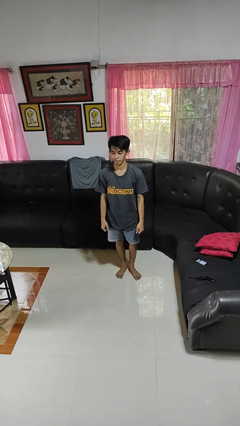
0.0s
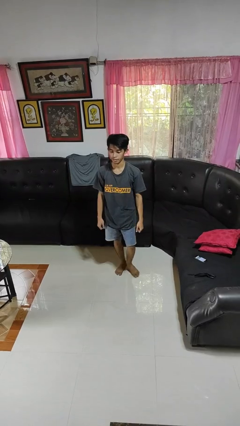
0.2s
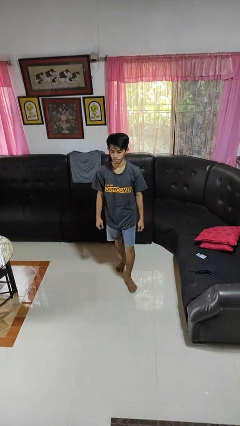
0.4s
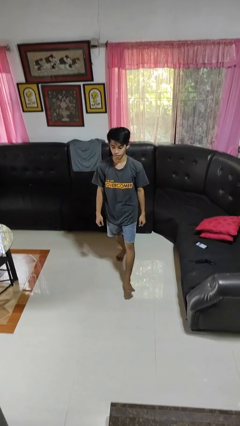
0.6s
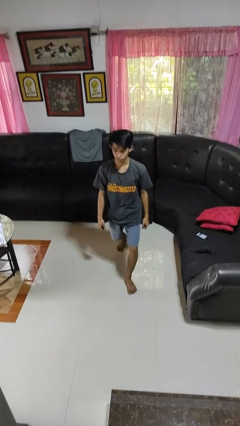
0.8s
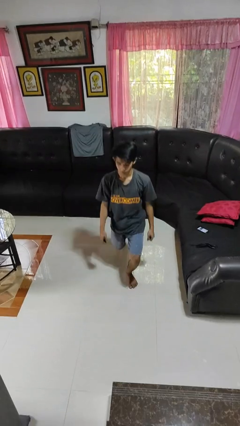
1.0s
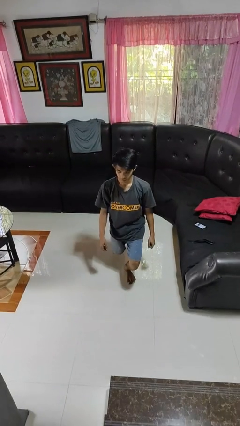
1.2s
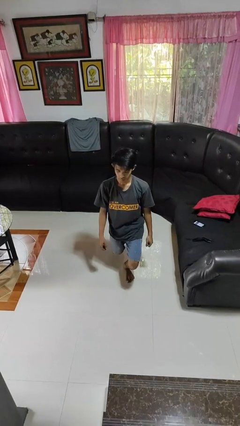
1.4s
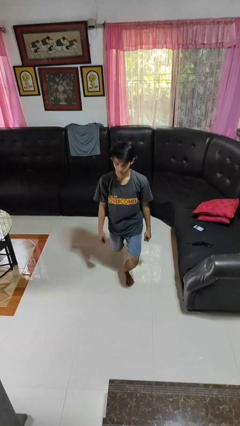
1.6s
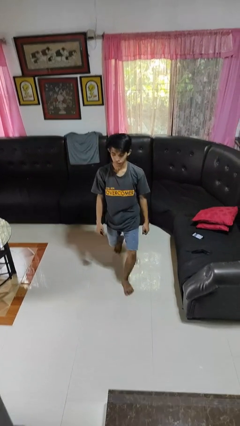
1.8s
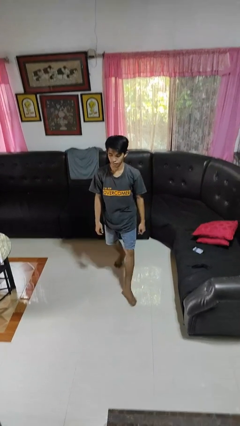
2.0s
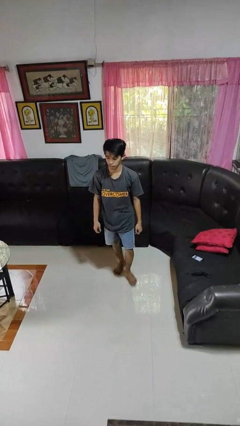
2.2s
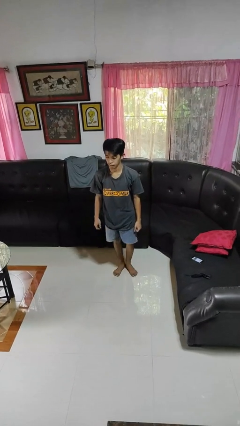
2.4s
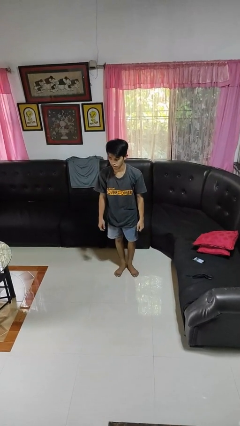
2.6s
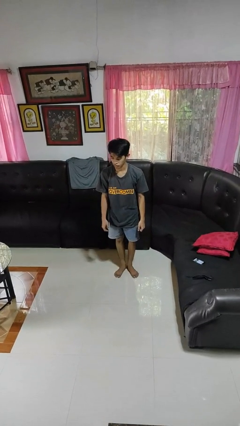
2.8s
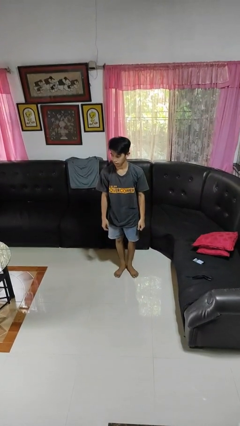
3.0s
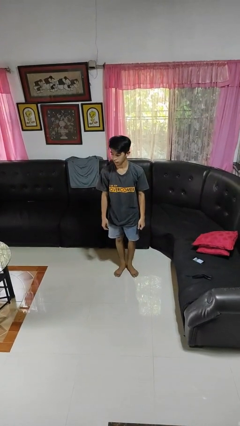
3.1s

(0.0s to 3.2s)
person exercises with lunges

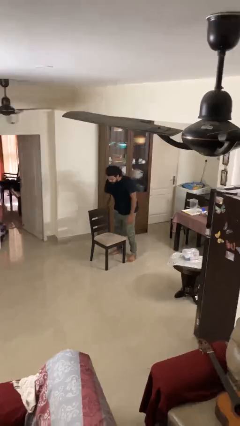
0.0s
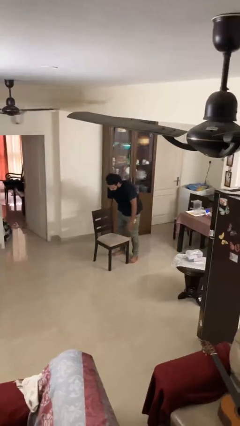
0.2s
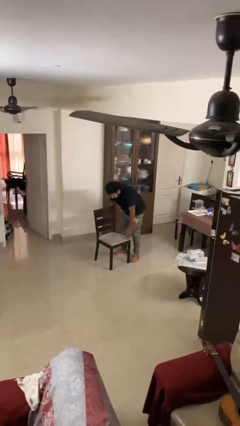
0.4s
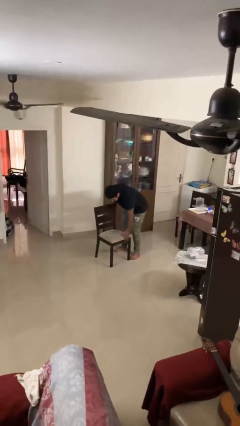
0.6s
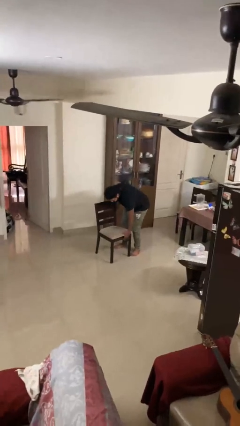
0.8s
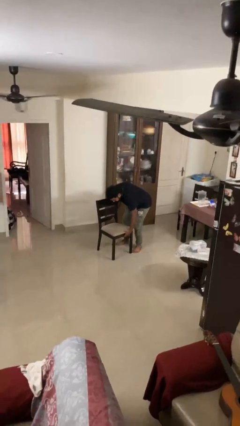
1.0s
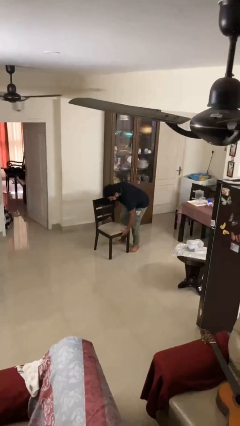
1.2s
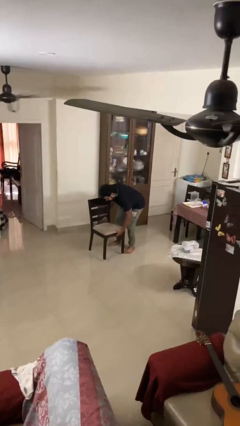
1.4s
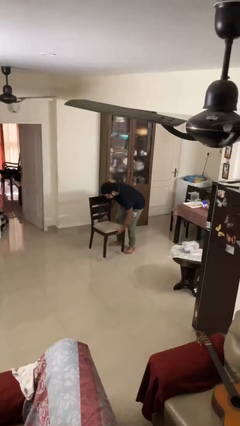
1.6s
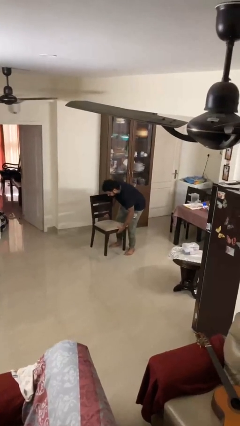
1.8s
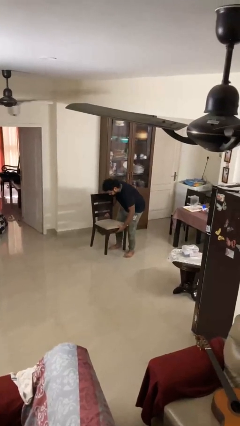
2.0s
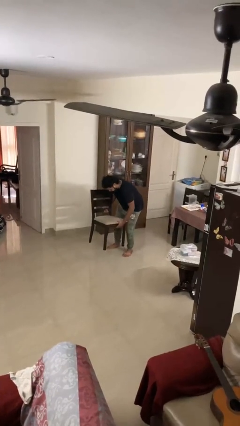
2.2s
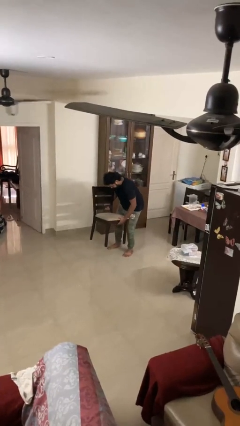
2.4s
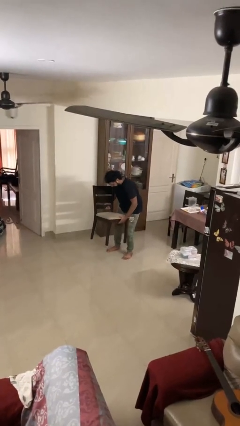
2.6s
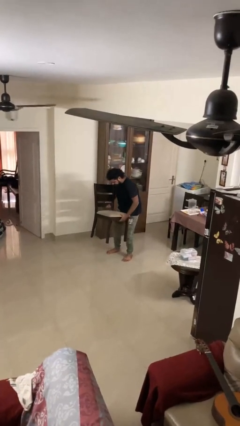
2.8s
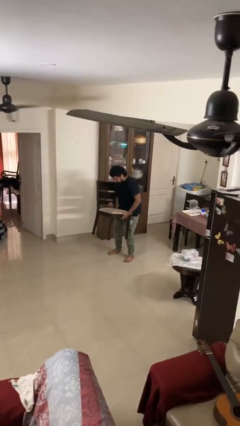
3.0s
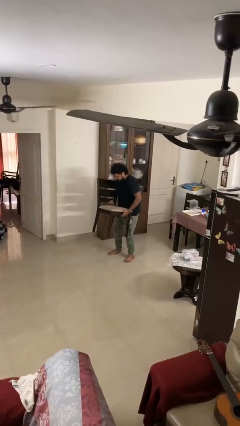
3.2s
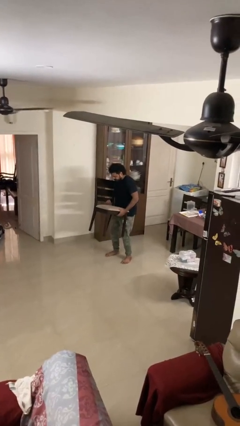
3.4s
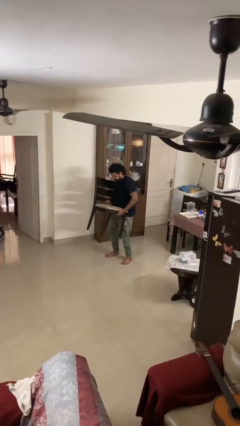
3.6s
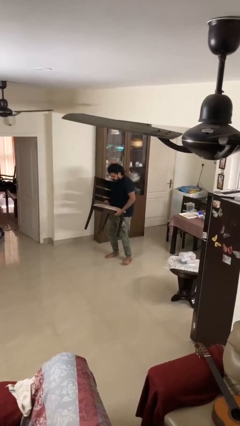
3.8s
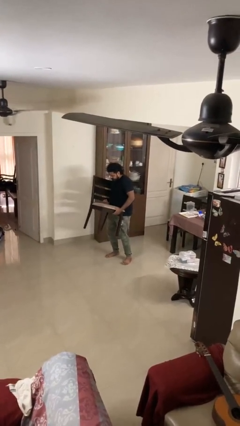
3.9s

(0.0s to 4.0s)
person picks up object from floor

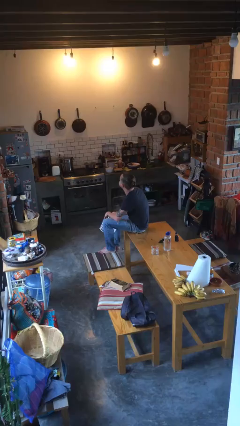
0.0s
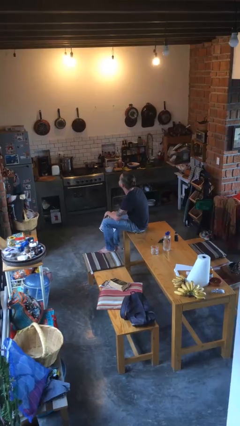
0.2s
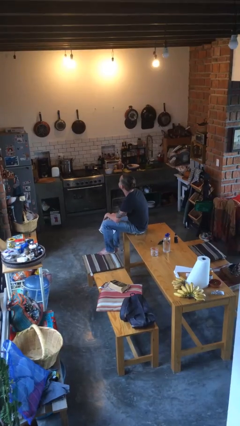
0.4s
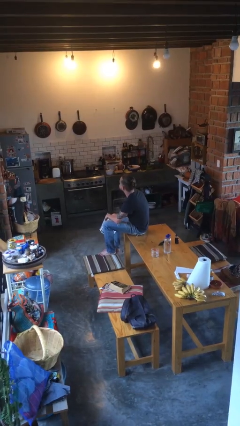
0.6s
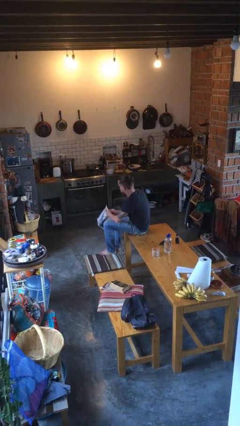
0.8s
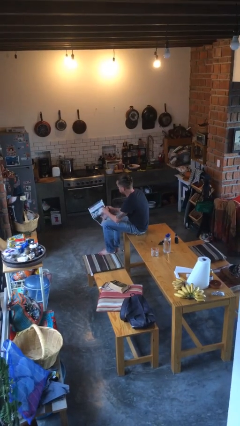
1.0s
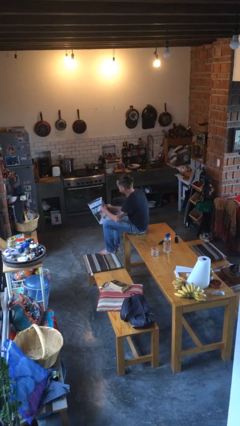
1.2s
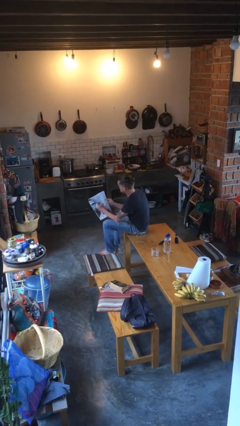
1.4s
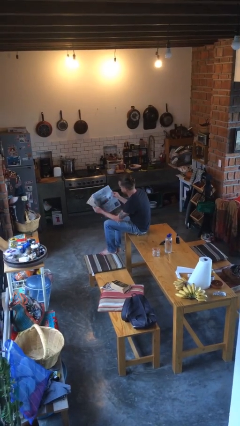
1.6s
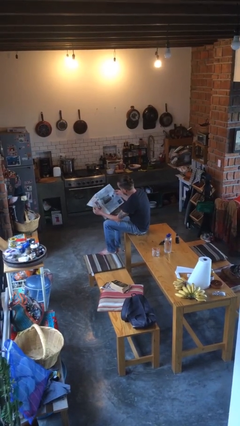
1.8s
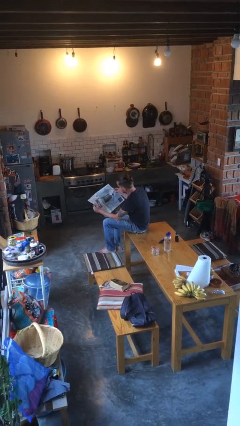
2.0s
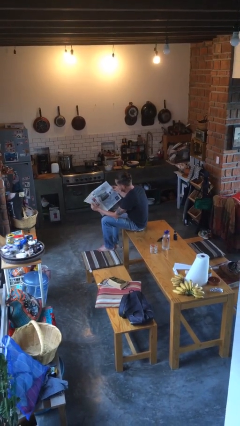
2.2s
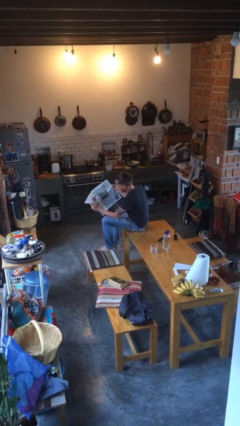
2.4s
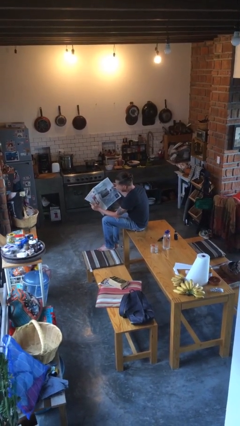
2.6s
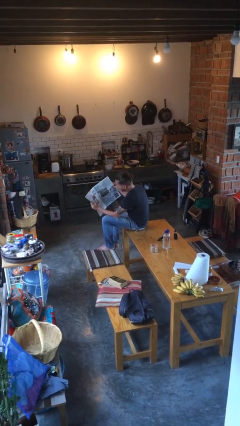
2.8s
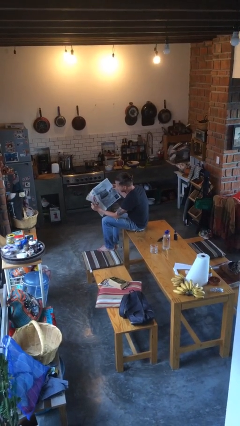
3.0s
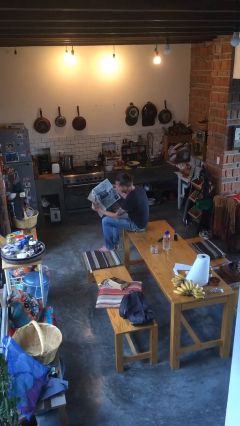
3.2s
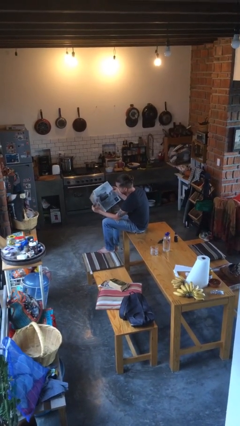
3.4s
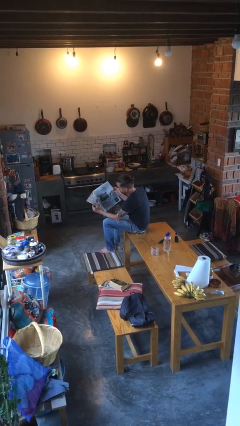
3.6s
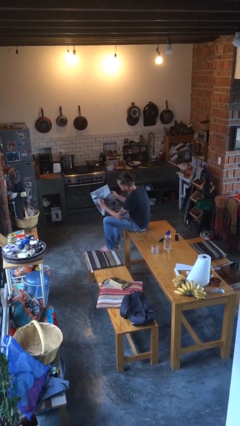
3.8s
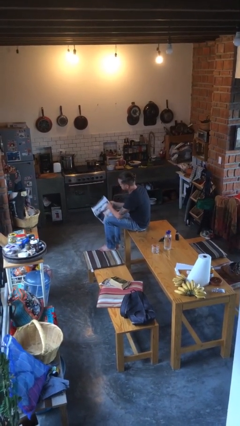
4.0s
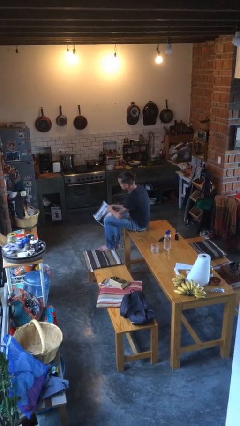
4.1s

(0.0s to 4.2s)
person reads newspaper

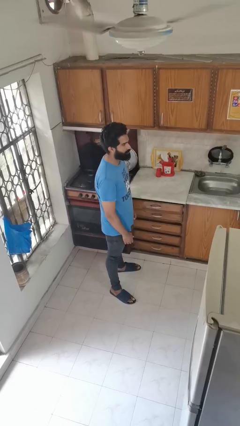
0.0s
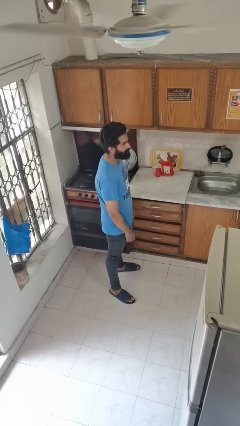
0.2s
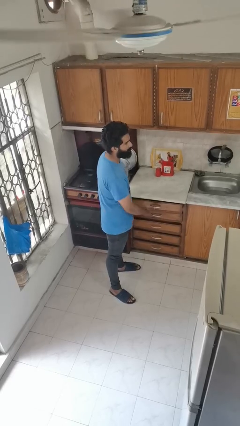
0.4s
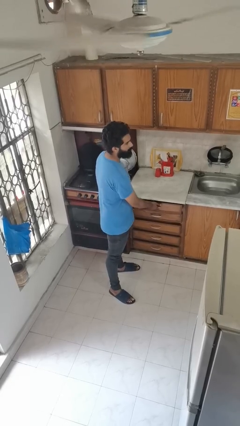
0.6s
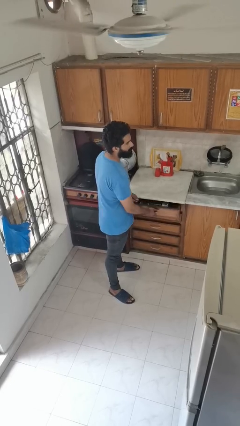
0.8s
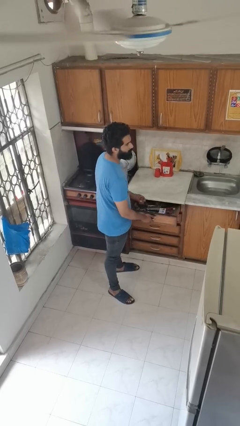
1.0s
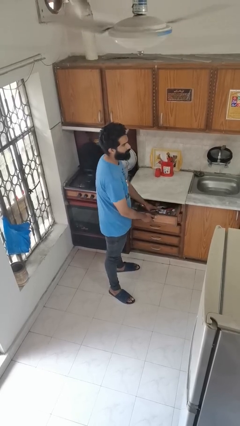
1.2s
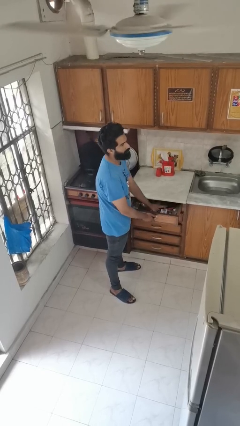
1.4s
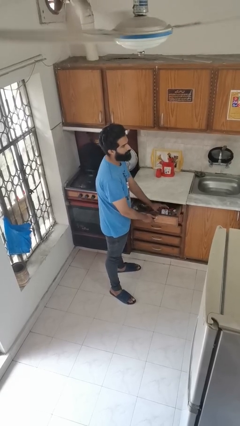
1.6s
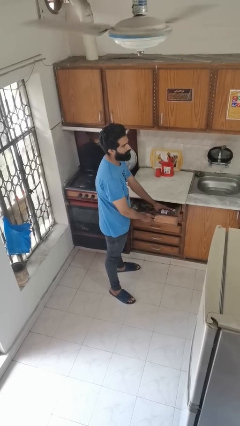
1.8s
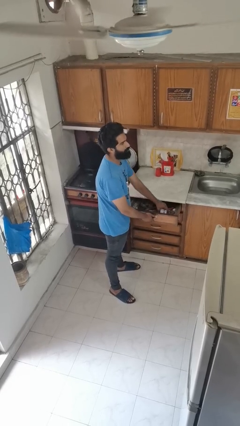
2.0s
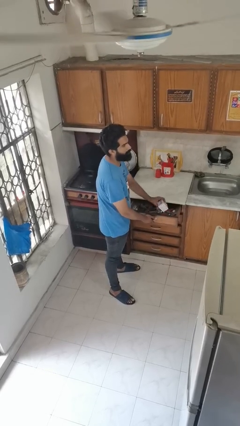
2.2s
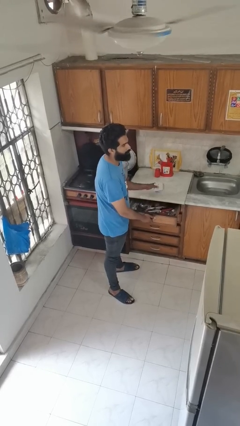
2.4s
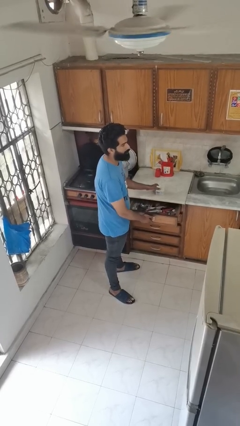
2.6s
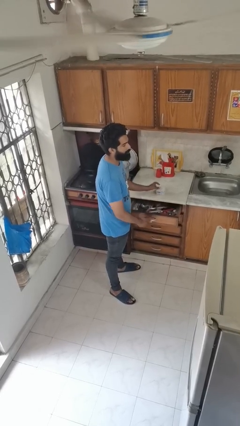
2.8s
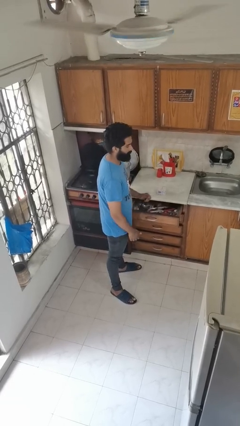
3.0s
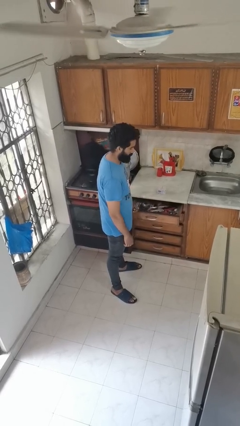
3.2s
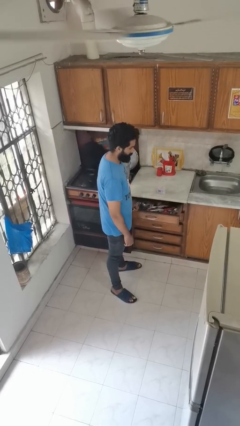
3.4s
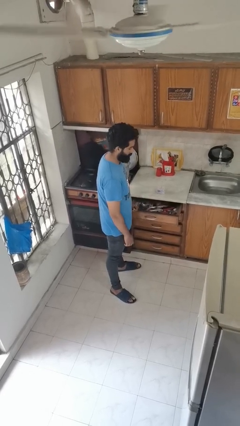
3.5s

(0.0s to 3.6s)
person takes object from kitchen drawer

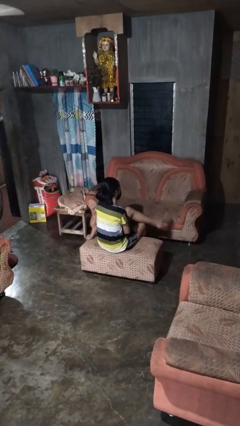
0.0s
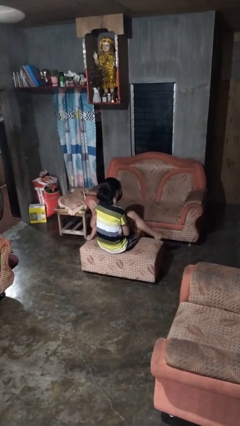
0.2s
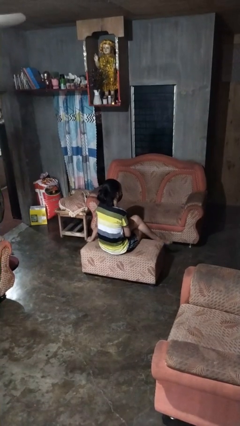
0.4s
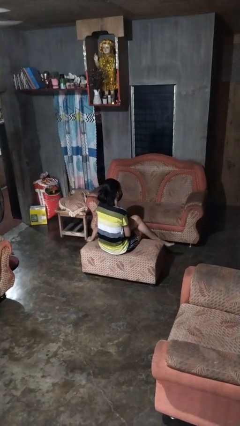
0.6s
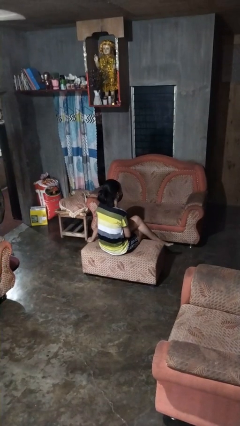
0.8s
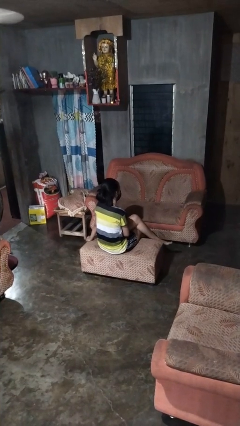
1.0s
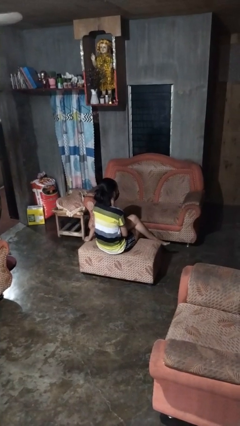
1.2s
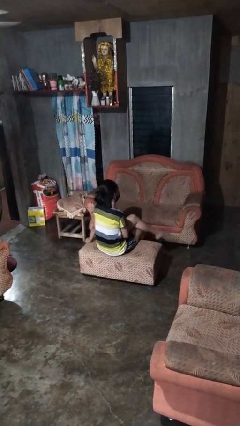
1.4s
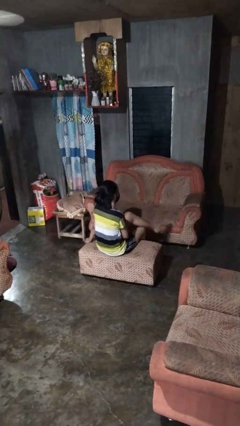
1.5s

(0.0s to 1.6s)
person crosses legs

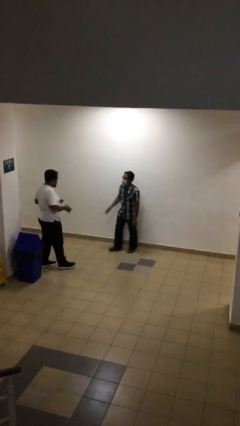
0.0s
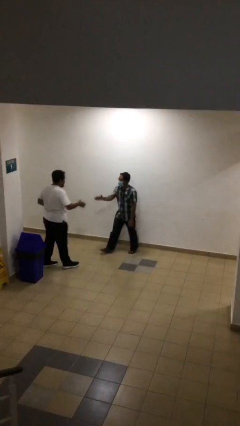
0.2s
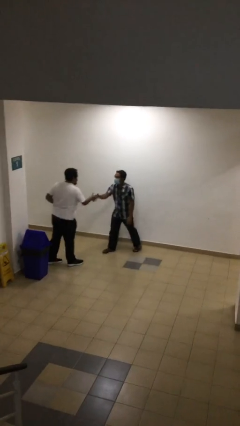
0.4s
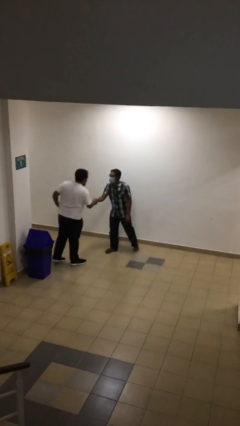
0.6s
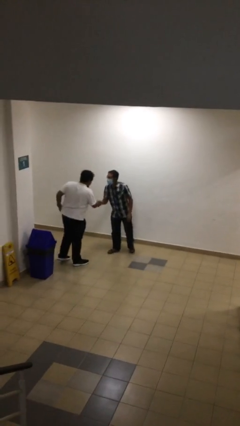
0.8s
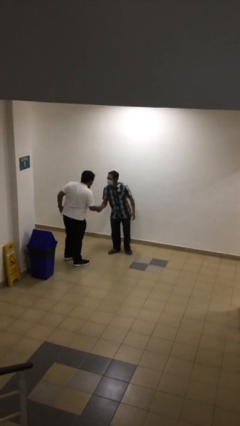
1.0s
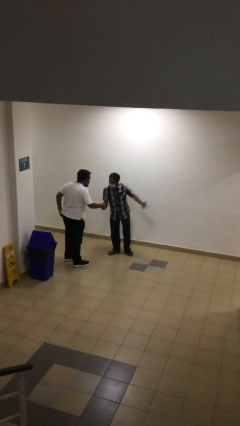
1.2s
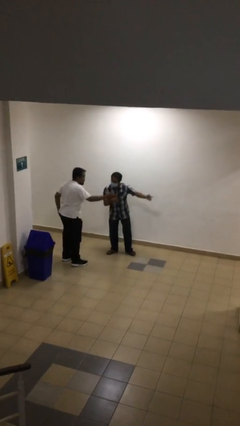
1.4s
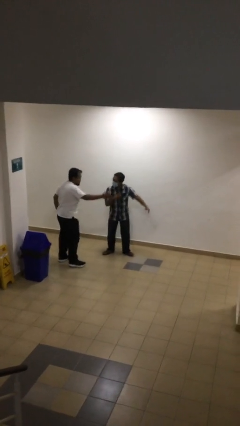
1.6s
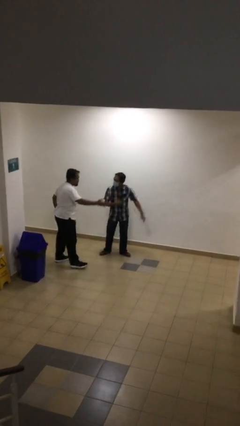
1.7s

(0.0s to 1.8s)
person shakes hand
